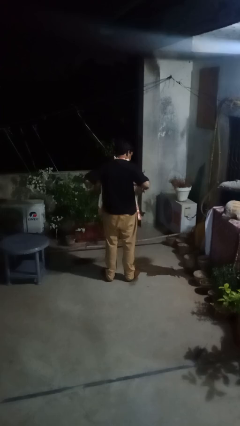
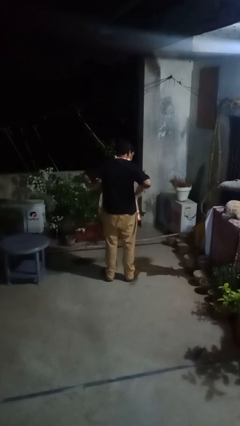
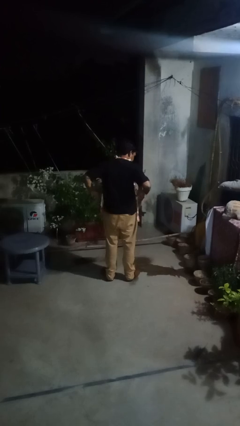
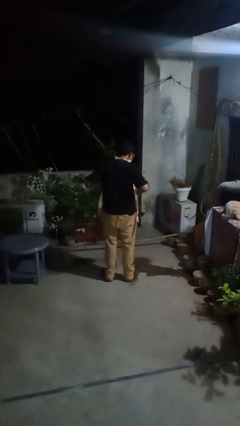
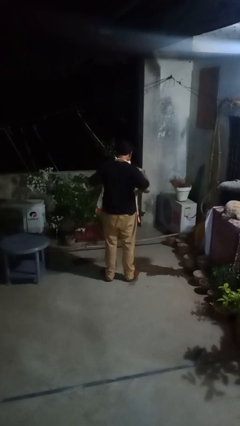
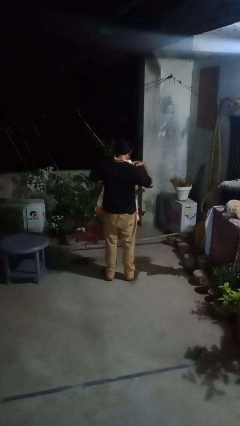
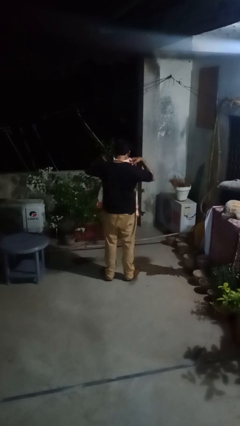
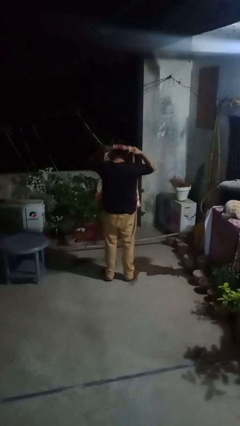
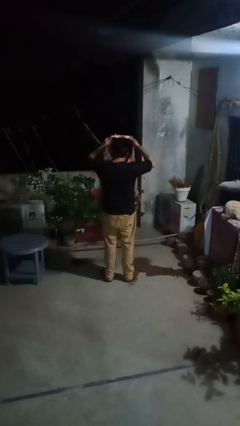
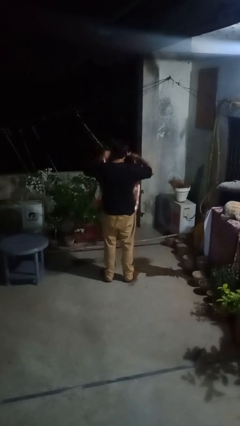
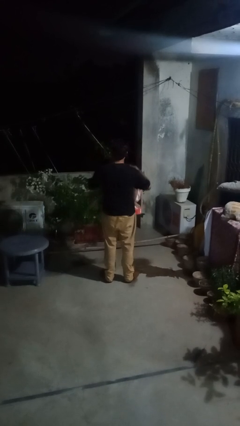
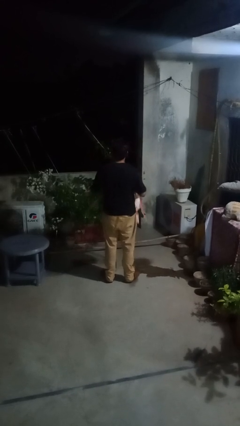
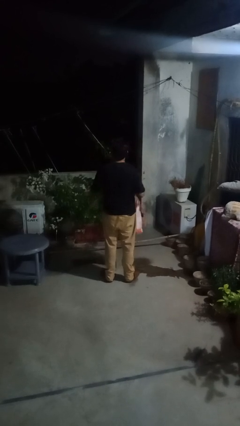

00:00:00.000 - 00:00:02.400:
person takes off apron

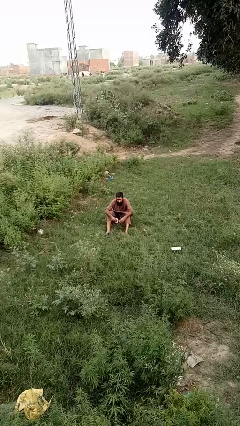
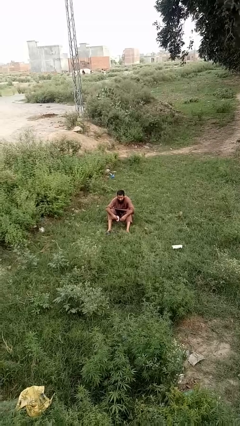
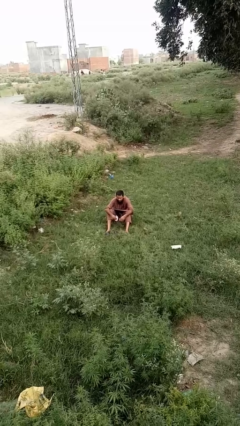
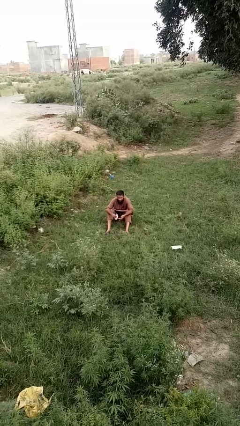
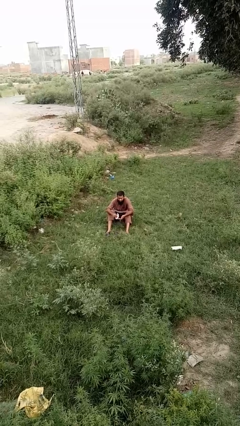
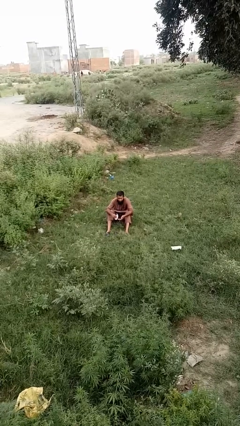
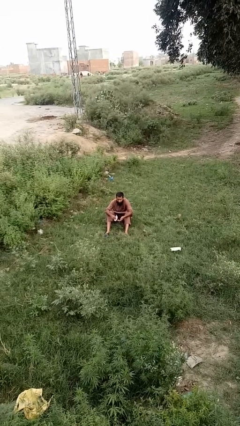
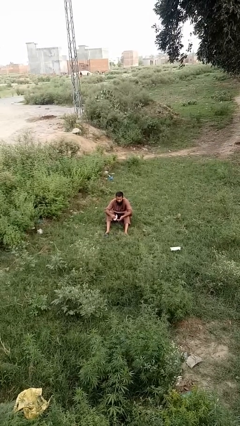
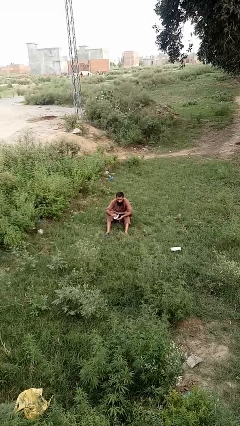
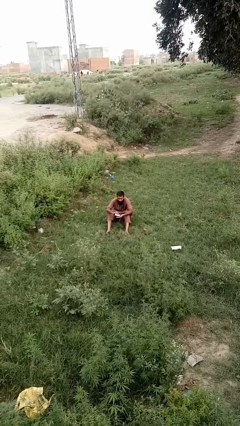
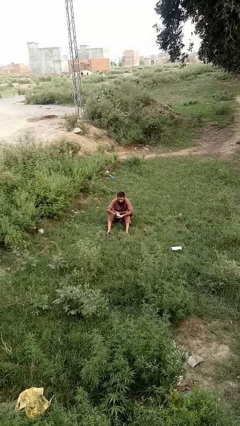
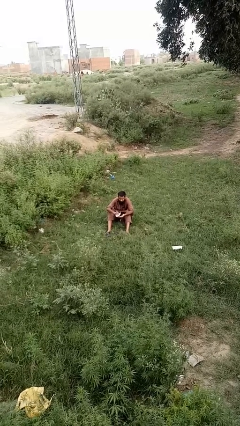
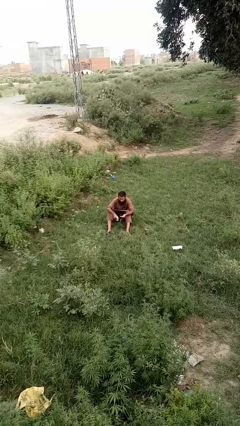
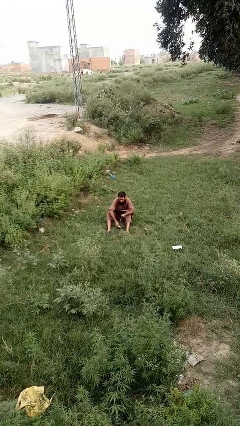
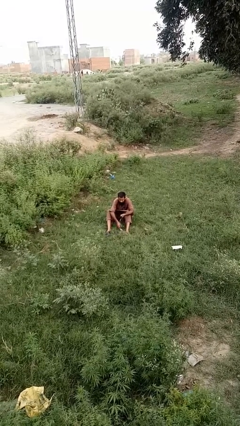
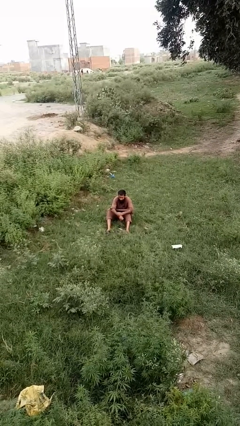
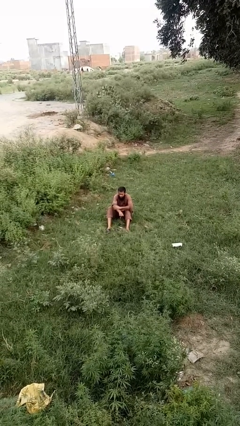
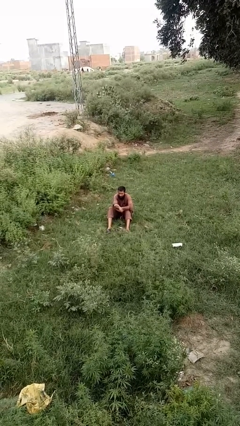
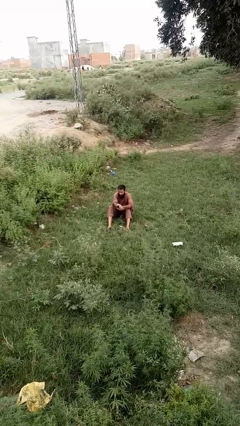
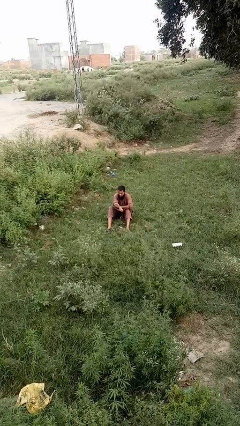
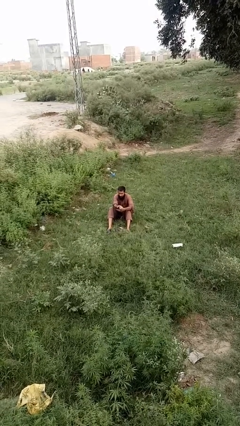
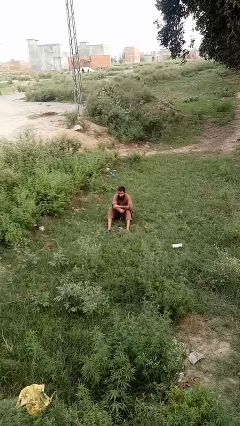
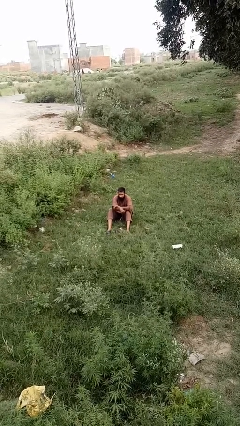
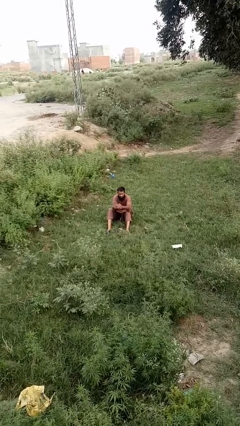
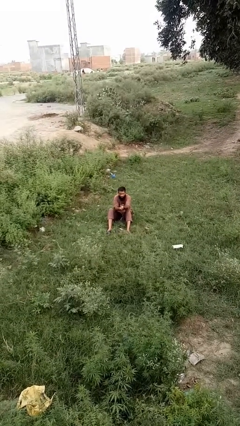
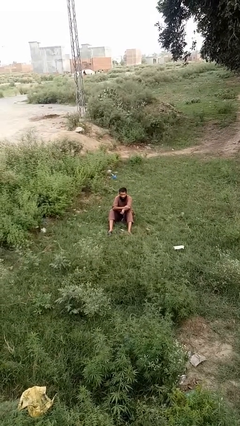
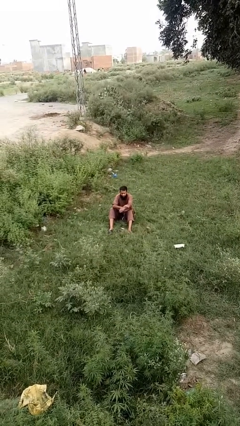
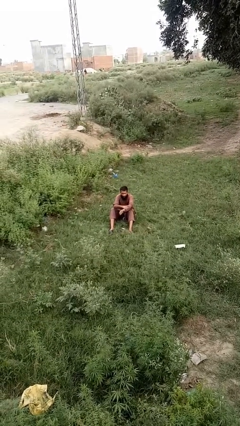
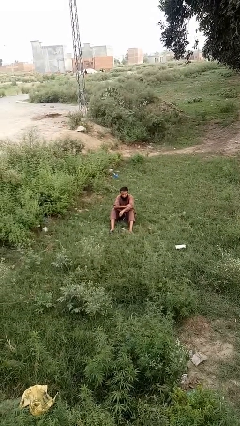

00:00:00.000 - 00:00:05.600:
person applies sunscreen

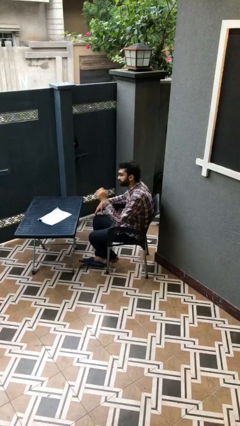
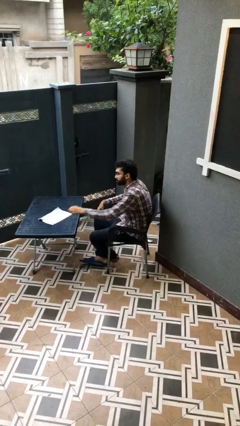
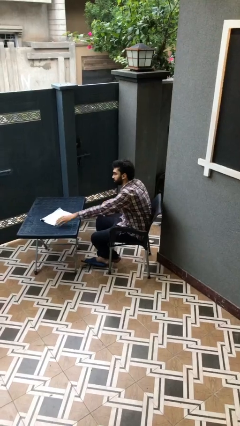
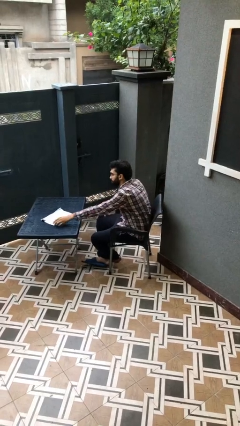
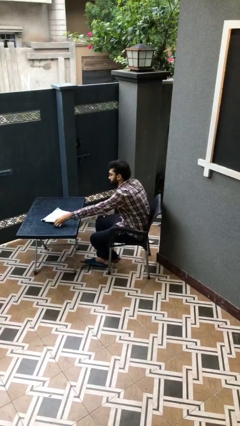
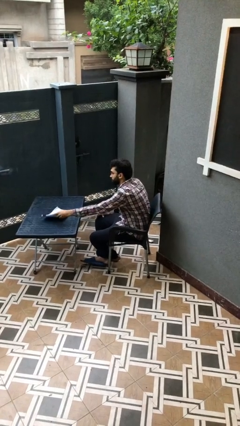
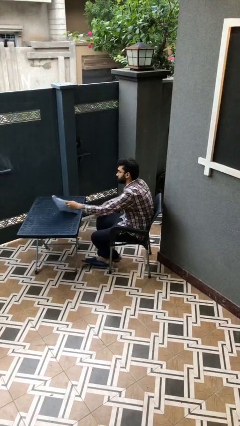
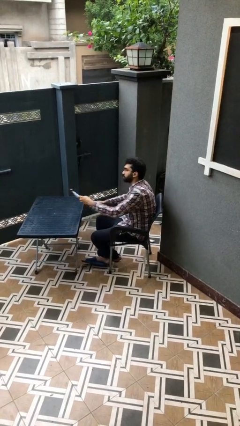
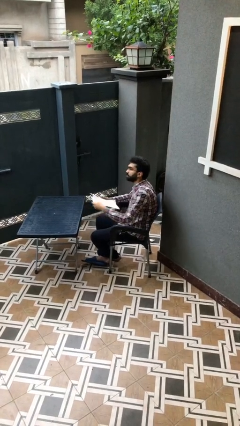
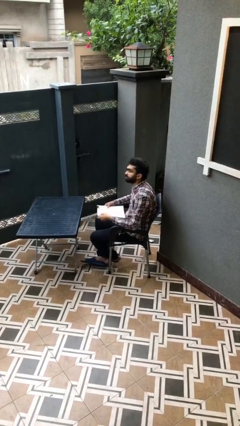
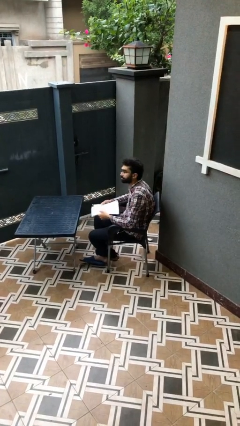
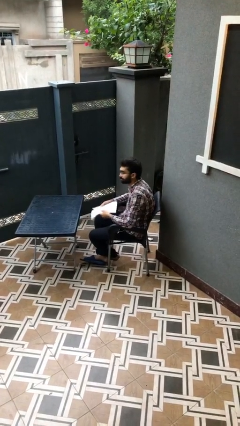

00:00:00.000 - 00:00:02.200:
person picks up object from table

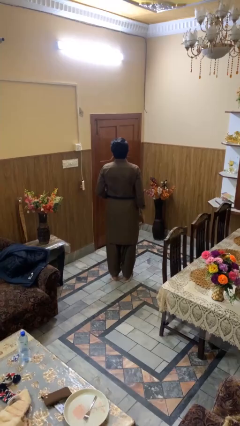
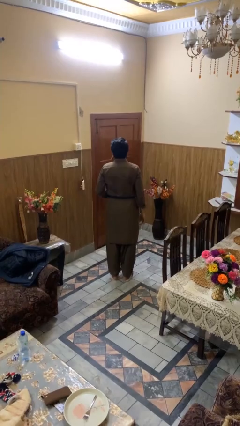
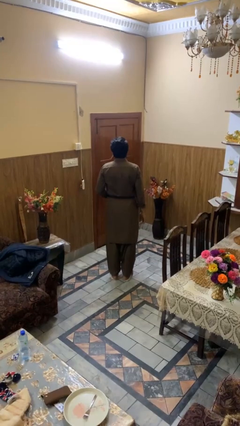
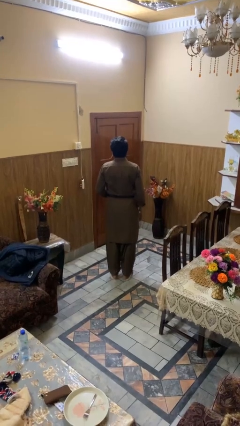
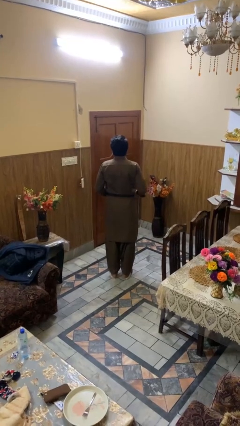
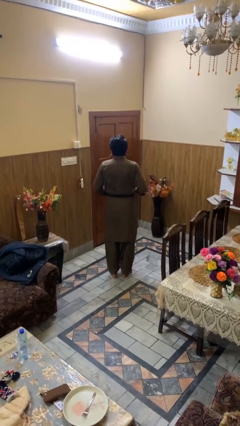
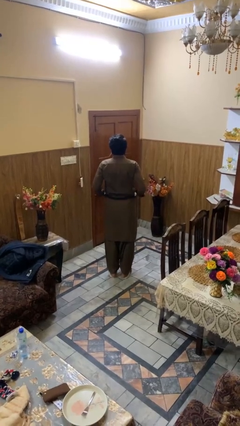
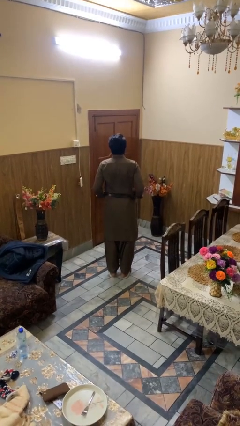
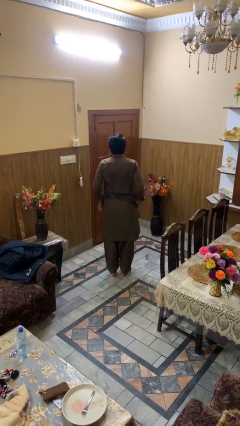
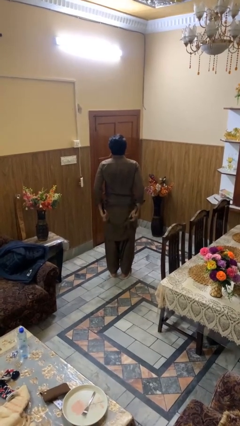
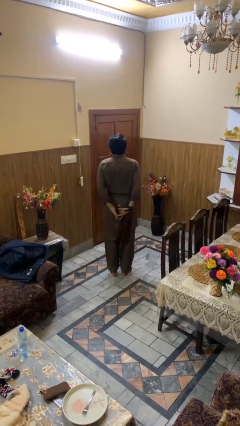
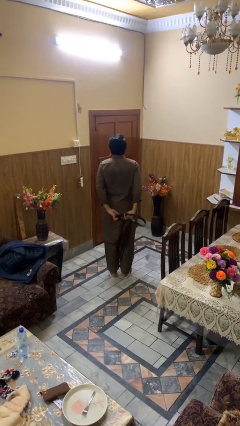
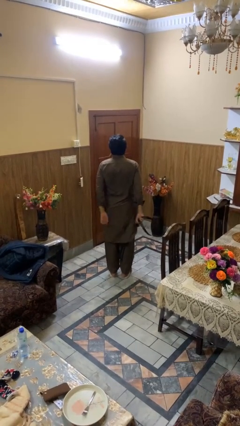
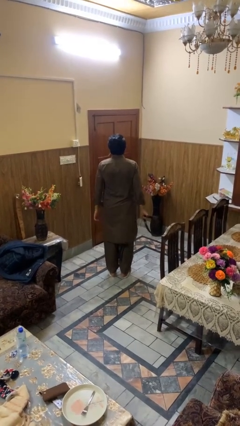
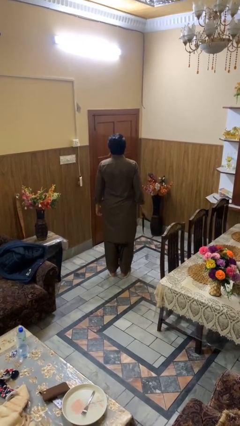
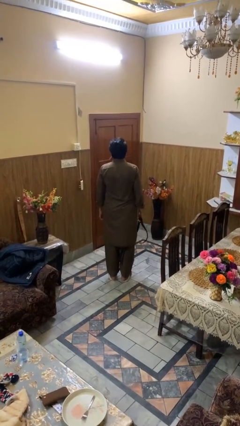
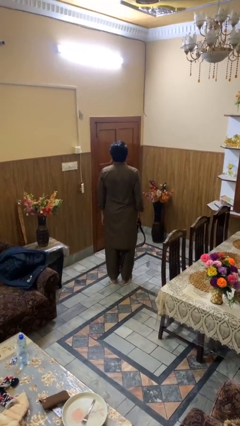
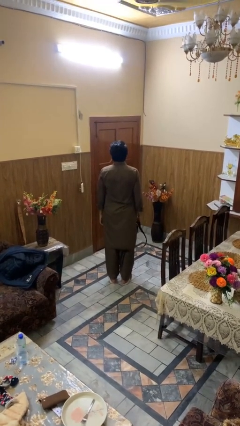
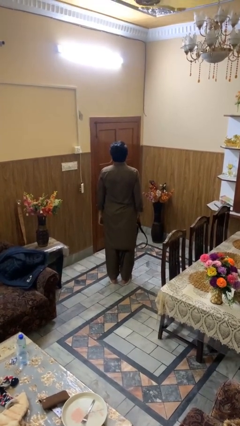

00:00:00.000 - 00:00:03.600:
person takes off belt

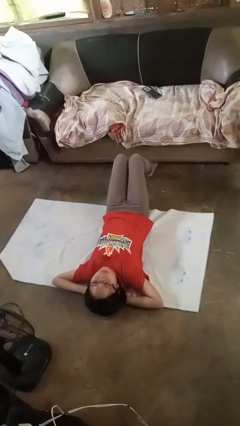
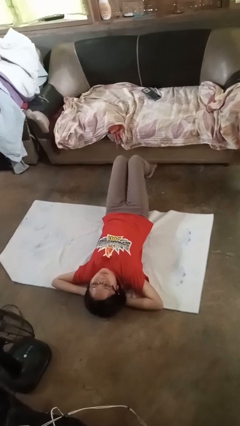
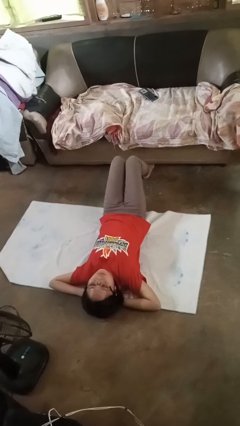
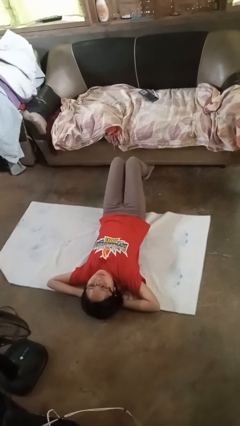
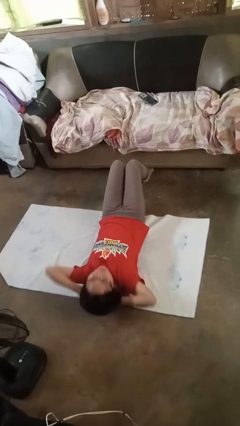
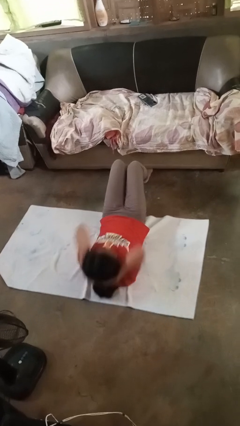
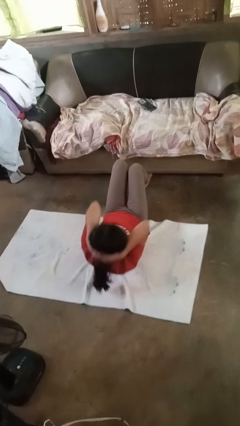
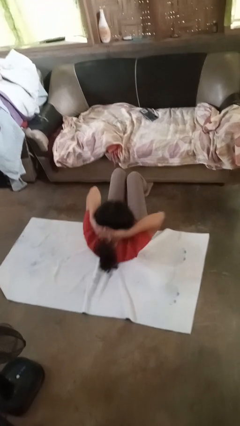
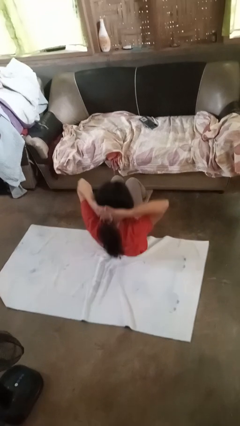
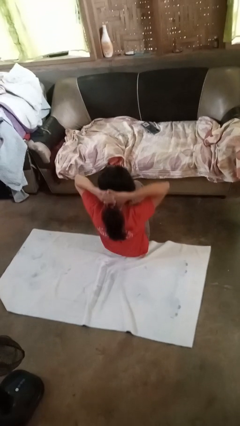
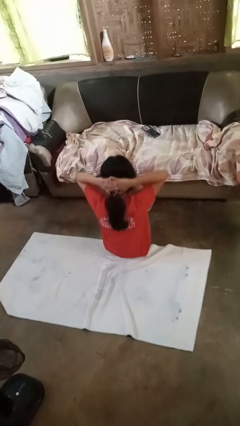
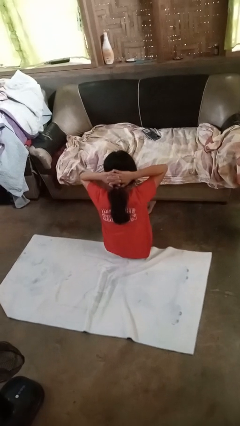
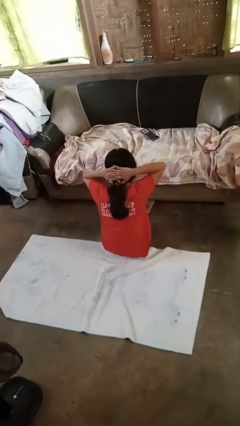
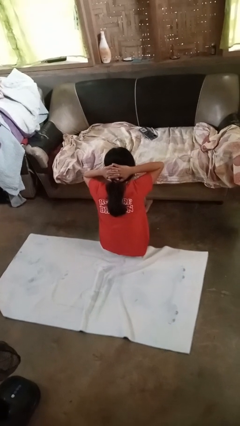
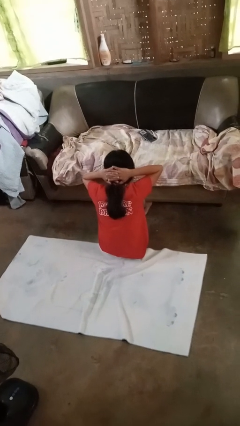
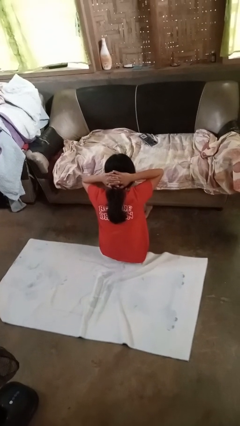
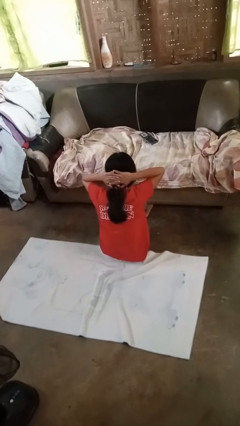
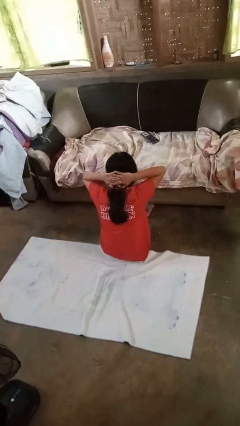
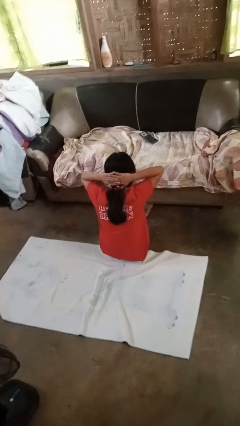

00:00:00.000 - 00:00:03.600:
person exercises with situp

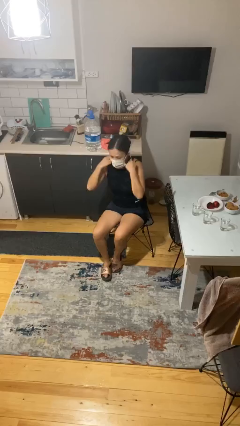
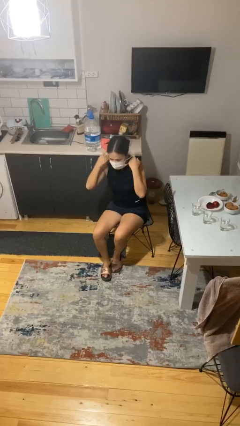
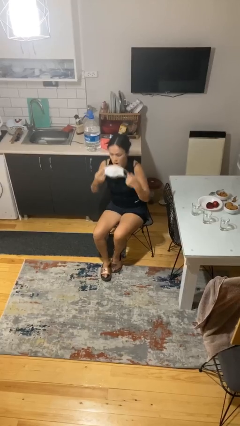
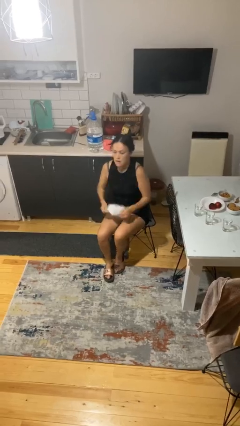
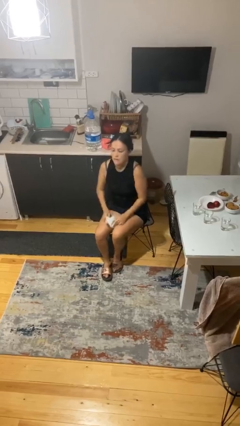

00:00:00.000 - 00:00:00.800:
person puts on facemask
